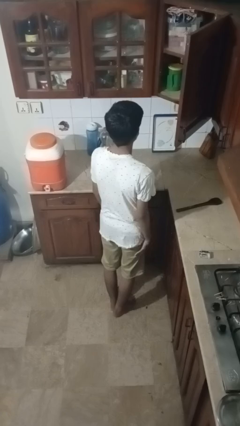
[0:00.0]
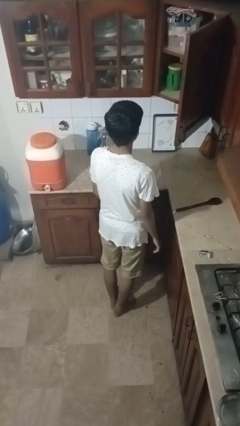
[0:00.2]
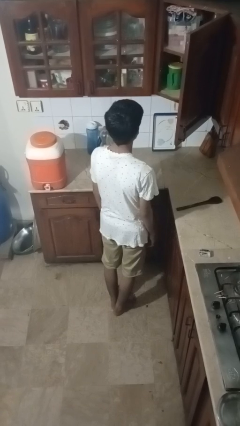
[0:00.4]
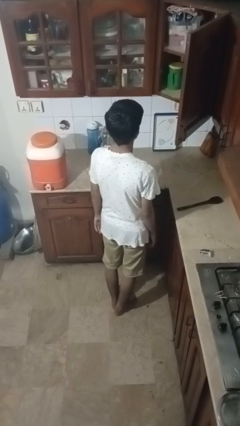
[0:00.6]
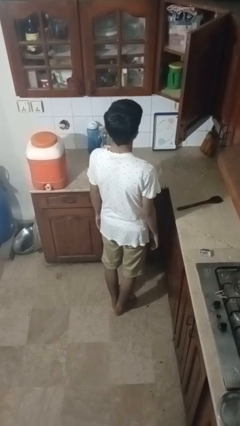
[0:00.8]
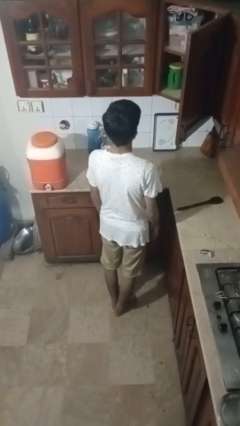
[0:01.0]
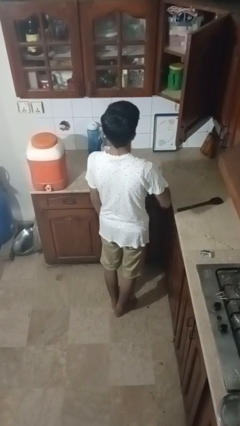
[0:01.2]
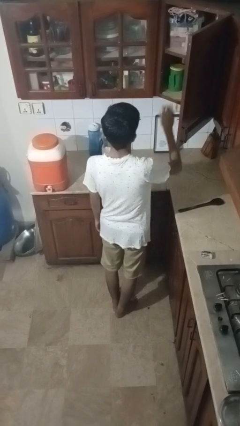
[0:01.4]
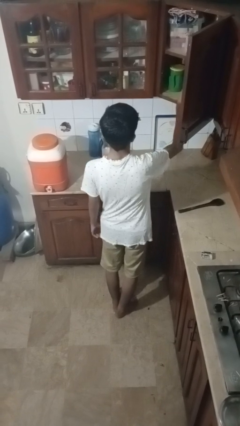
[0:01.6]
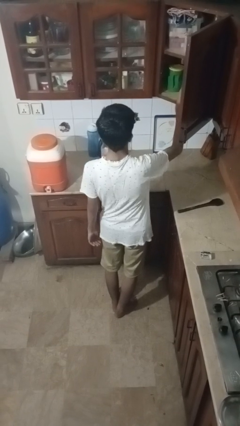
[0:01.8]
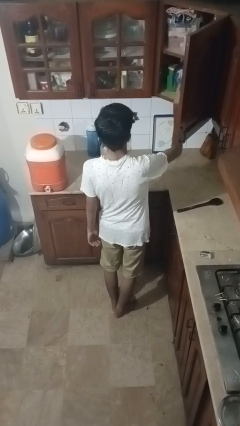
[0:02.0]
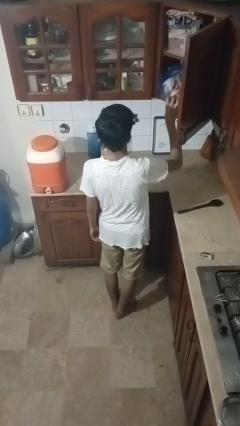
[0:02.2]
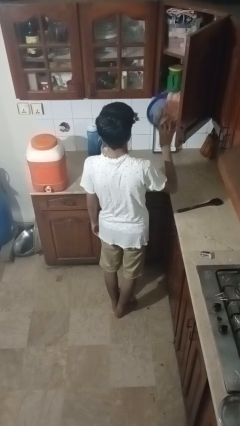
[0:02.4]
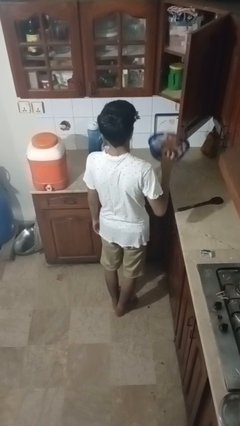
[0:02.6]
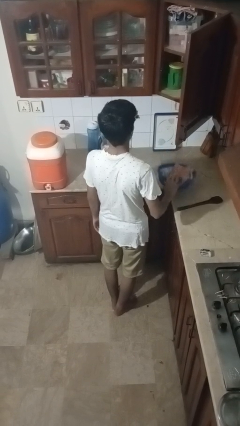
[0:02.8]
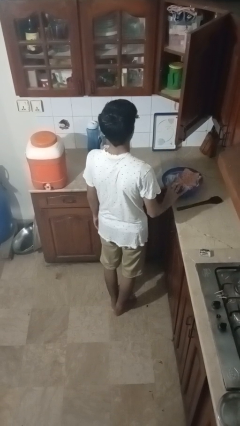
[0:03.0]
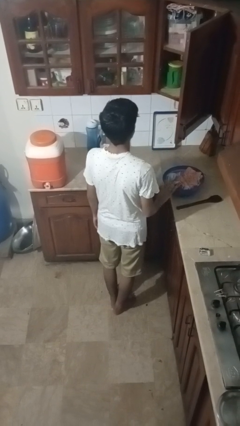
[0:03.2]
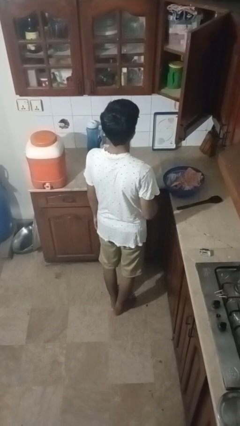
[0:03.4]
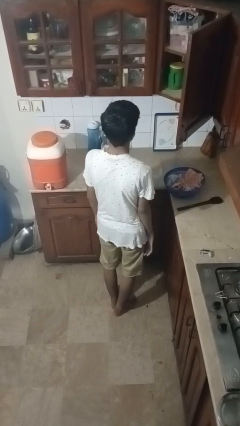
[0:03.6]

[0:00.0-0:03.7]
person takes object from cabinet

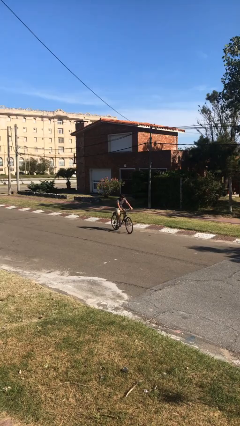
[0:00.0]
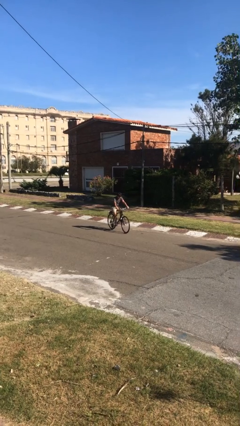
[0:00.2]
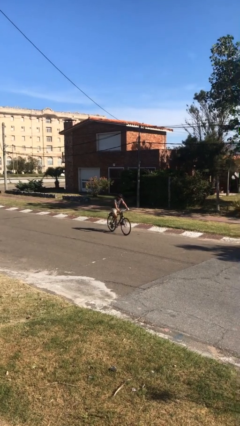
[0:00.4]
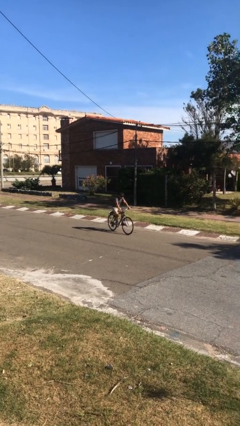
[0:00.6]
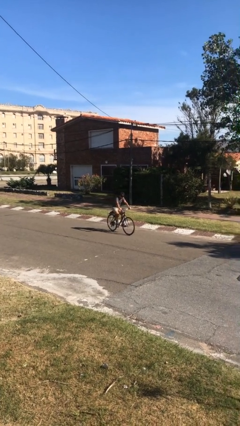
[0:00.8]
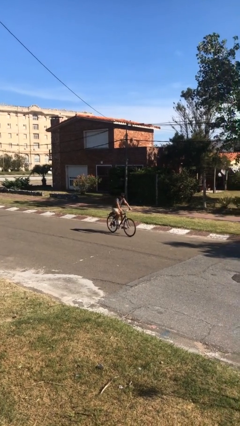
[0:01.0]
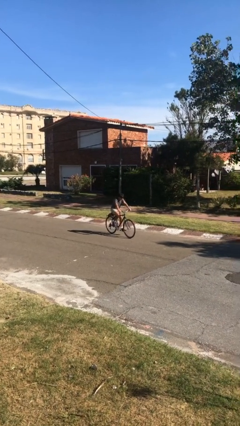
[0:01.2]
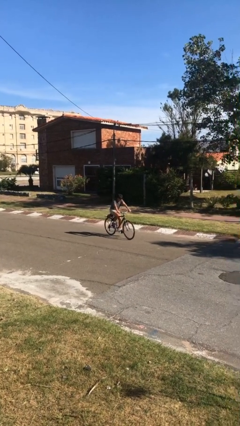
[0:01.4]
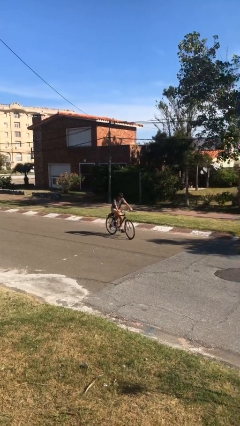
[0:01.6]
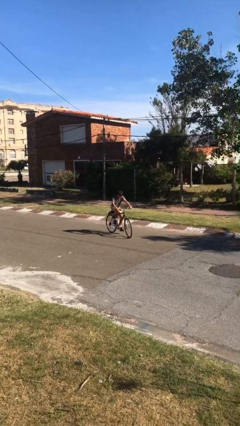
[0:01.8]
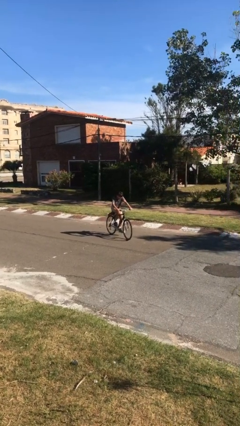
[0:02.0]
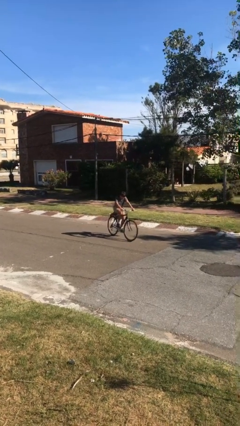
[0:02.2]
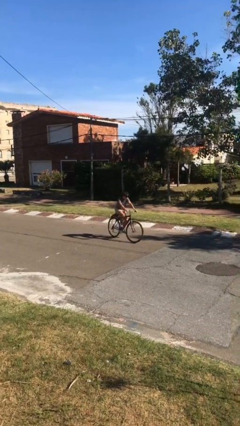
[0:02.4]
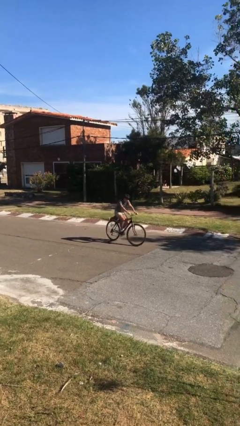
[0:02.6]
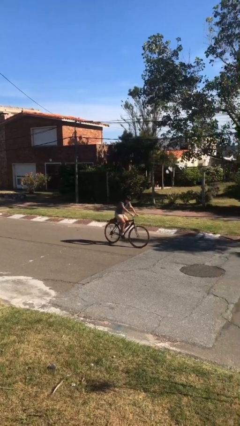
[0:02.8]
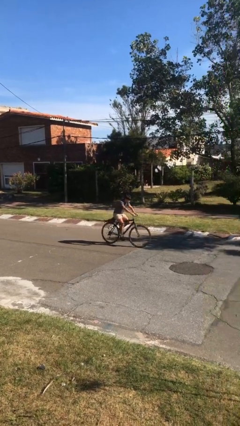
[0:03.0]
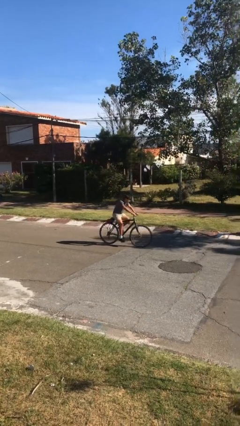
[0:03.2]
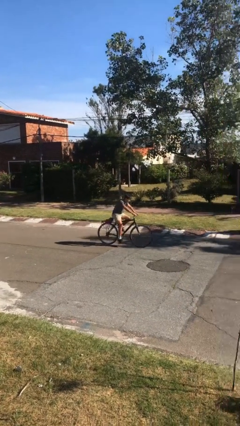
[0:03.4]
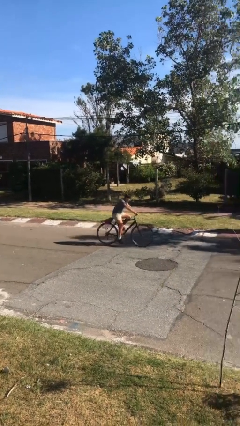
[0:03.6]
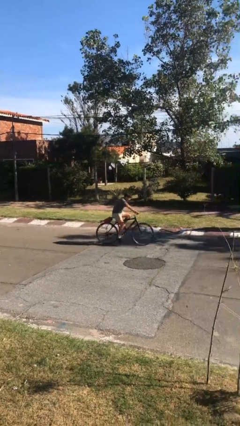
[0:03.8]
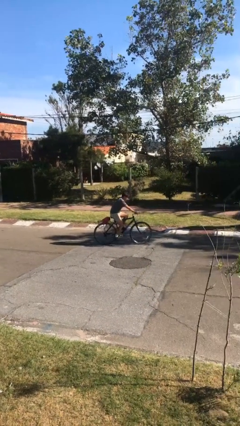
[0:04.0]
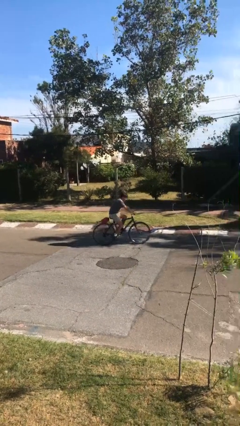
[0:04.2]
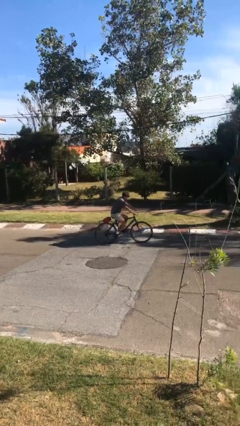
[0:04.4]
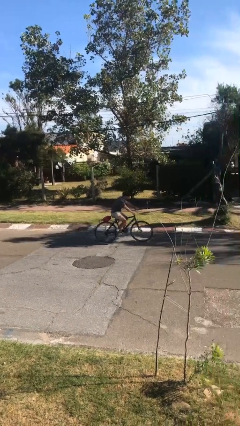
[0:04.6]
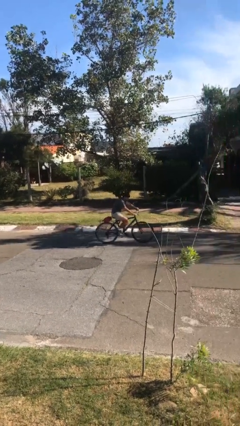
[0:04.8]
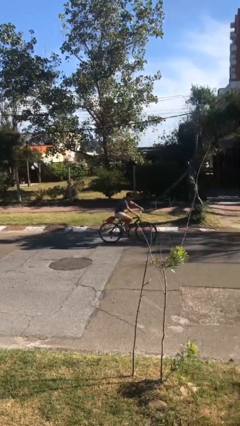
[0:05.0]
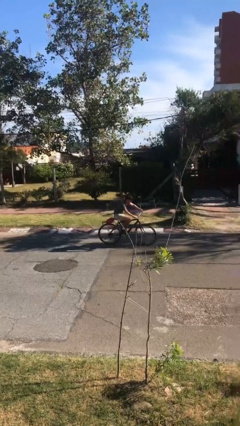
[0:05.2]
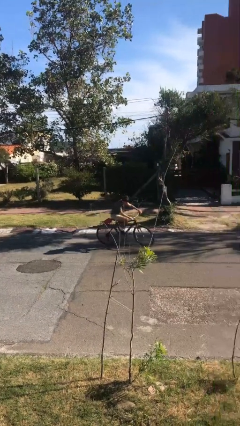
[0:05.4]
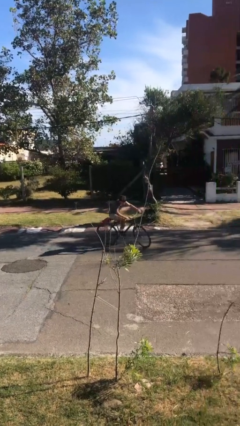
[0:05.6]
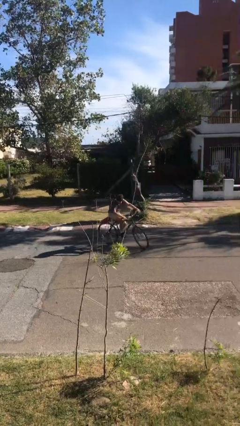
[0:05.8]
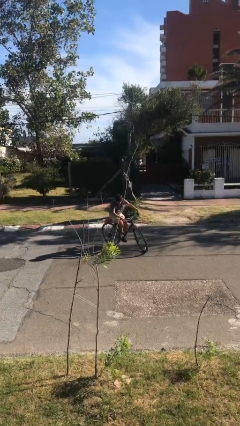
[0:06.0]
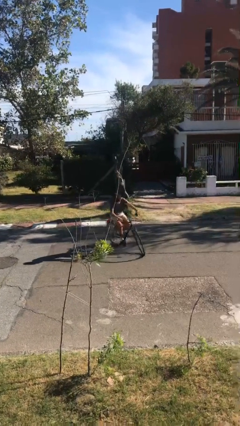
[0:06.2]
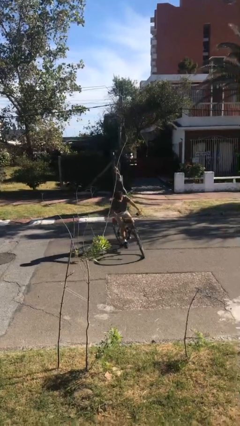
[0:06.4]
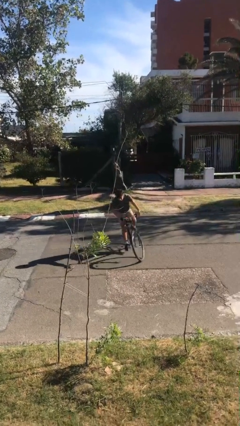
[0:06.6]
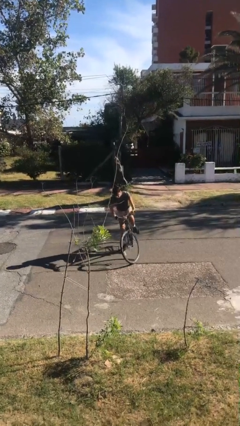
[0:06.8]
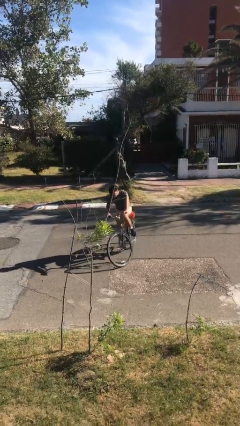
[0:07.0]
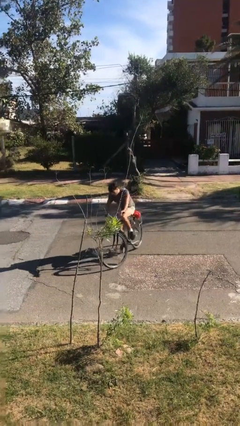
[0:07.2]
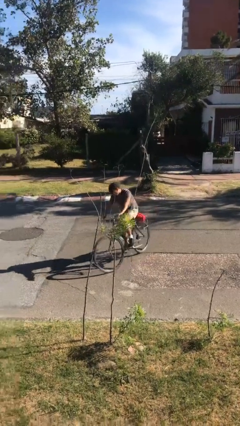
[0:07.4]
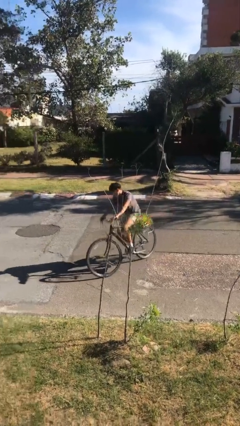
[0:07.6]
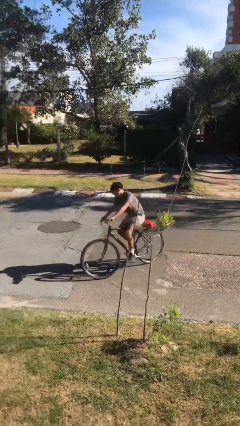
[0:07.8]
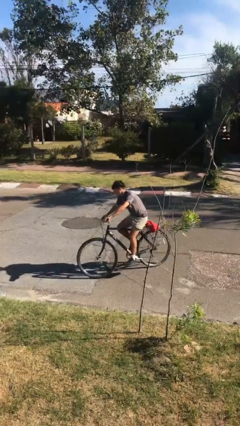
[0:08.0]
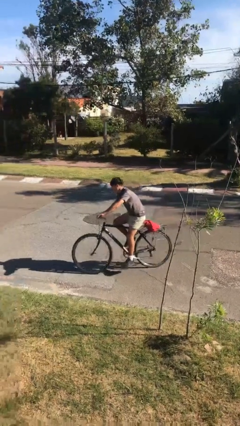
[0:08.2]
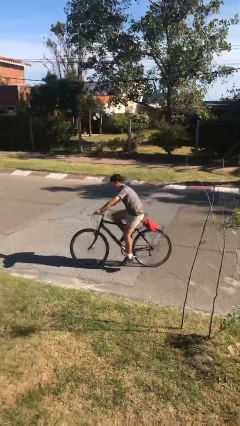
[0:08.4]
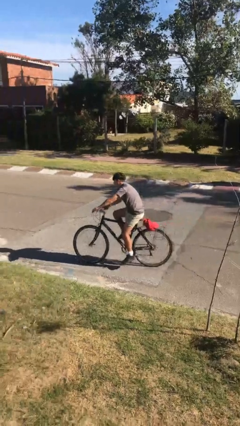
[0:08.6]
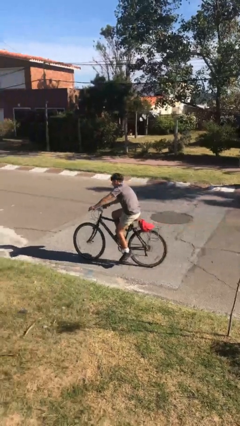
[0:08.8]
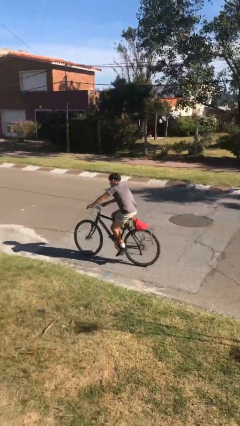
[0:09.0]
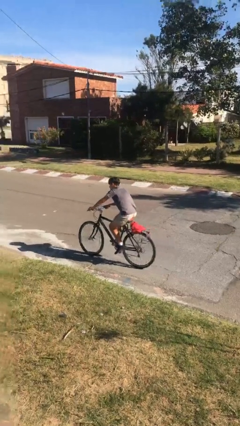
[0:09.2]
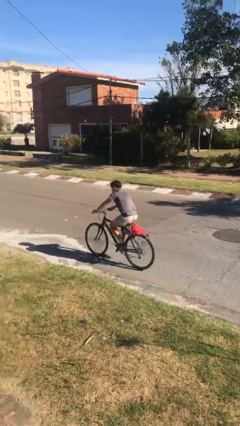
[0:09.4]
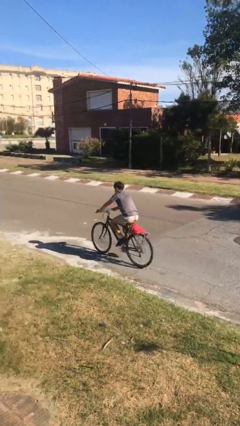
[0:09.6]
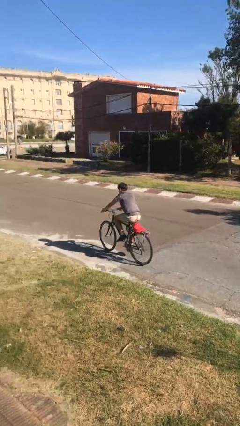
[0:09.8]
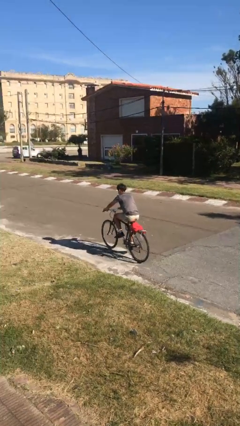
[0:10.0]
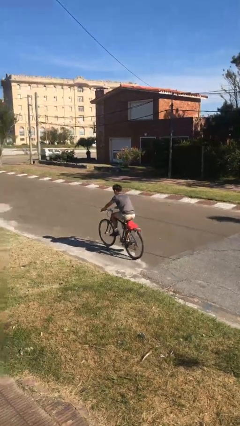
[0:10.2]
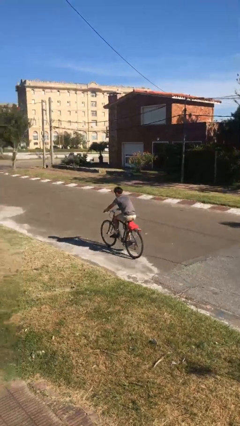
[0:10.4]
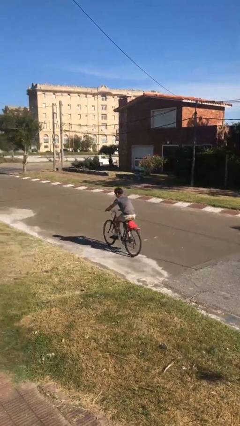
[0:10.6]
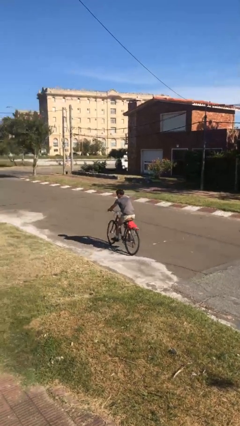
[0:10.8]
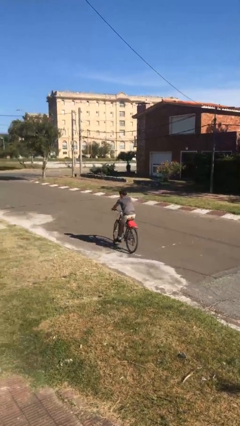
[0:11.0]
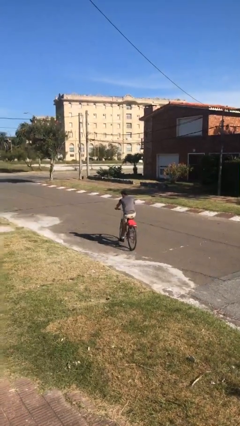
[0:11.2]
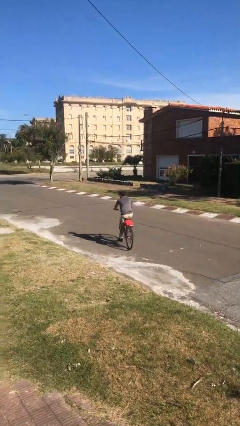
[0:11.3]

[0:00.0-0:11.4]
person rides bicycle

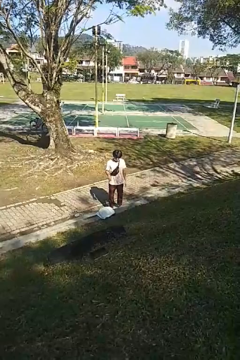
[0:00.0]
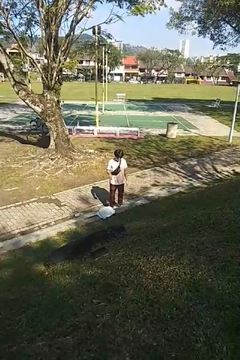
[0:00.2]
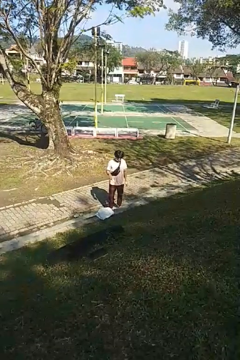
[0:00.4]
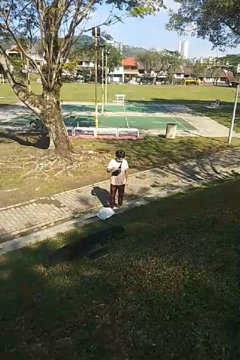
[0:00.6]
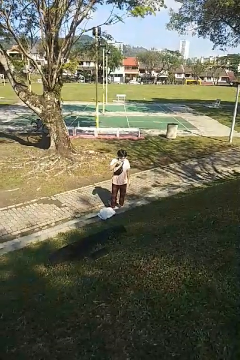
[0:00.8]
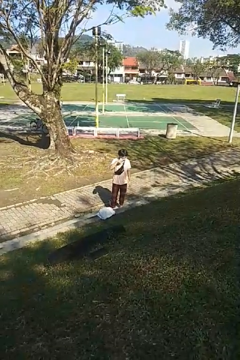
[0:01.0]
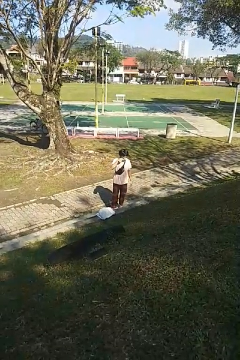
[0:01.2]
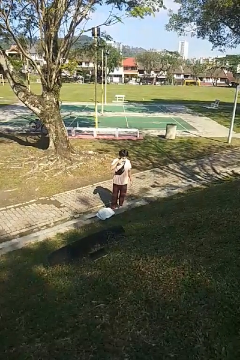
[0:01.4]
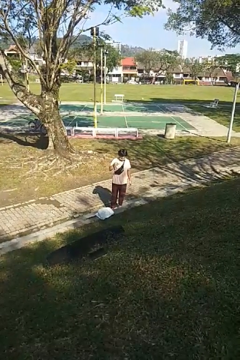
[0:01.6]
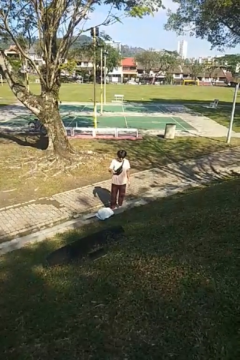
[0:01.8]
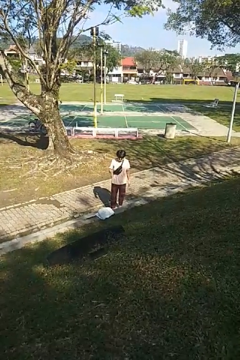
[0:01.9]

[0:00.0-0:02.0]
person brushes teeth

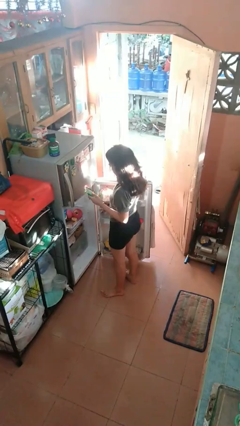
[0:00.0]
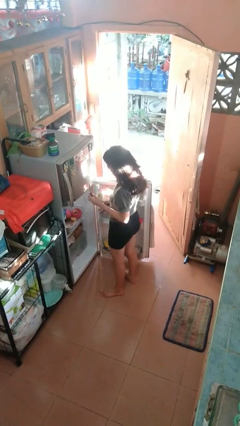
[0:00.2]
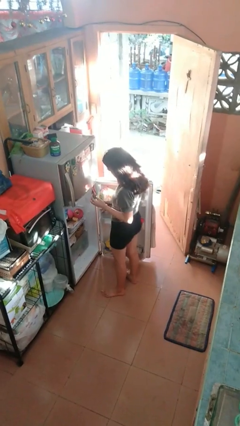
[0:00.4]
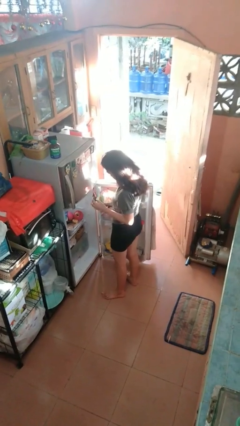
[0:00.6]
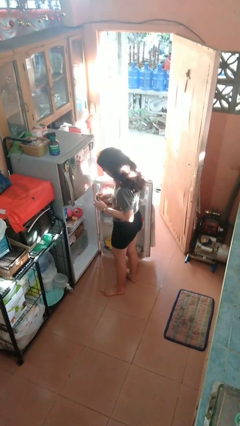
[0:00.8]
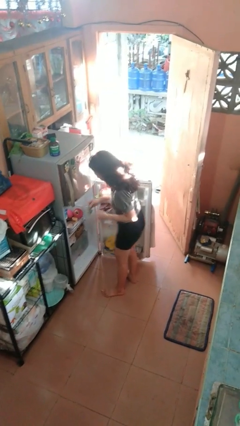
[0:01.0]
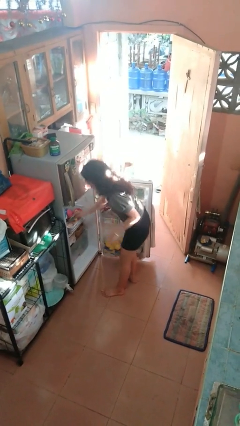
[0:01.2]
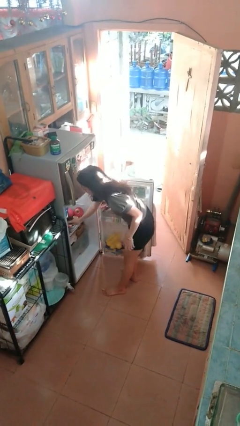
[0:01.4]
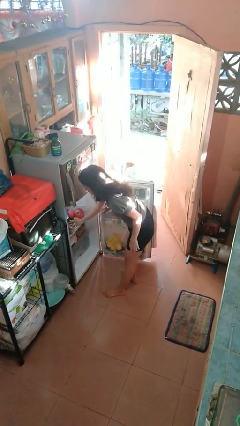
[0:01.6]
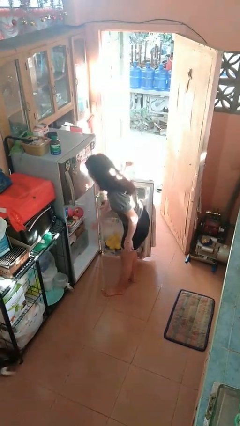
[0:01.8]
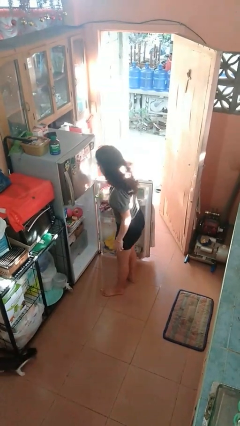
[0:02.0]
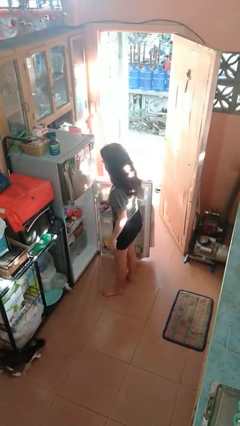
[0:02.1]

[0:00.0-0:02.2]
person puts object into refrigerator
